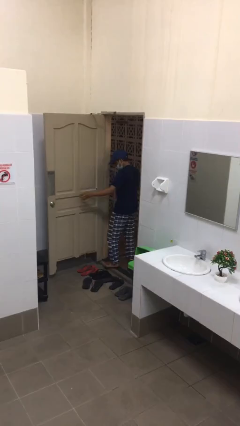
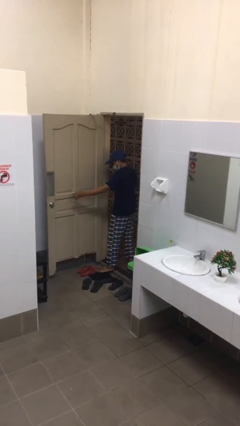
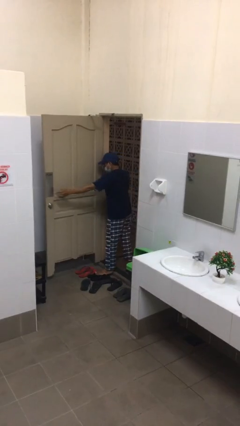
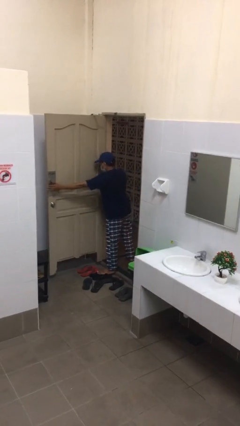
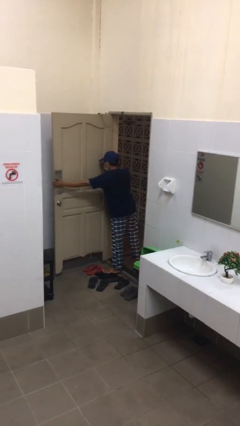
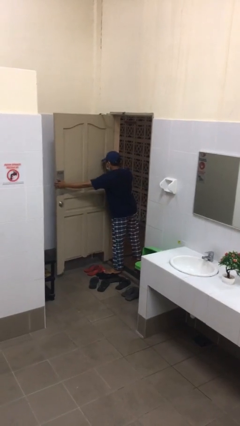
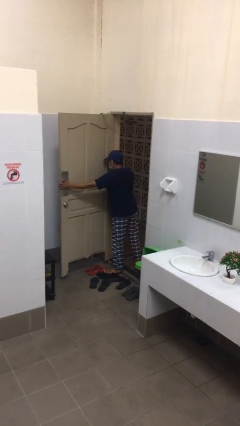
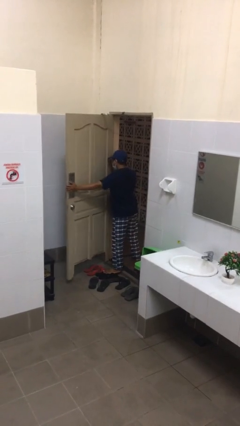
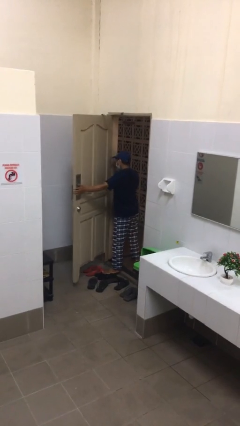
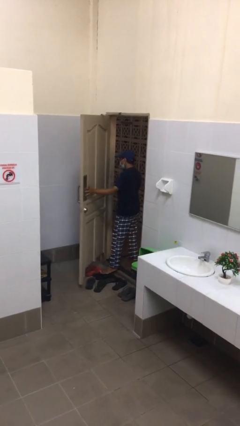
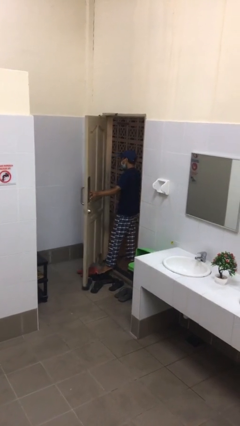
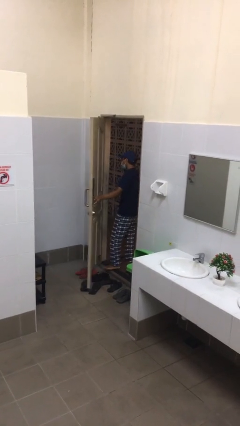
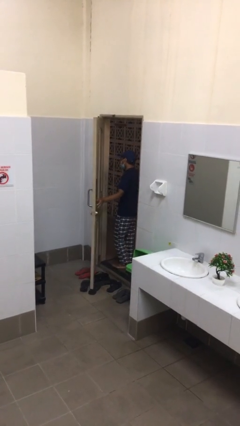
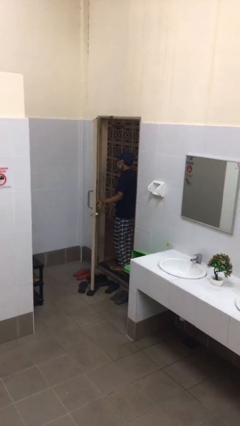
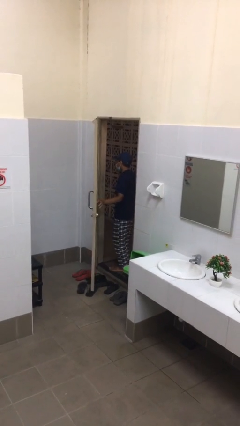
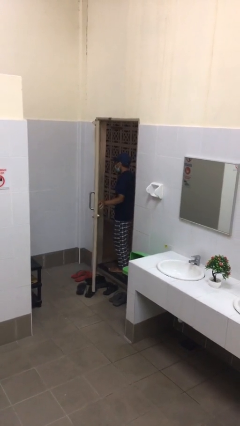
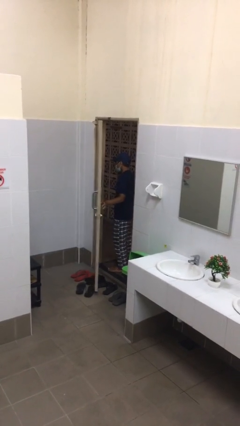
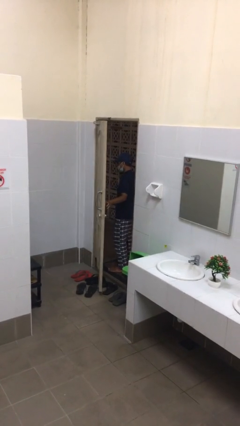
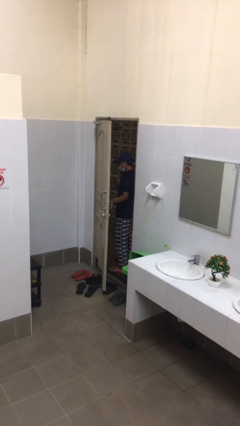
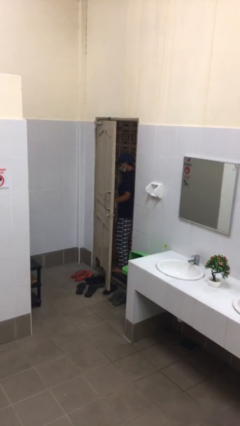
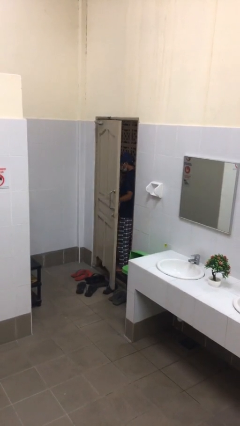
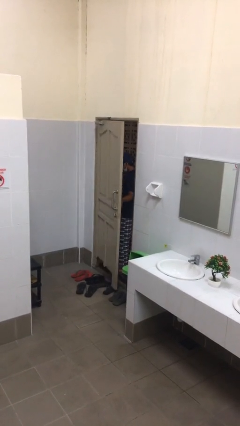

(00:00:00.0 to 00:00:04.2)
person closes facility door

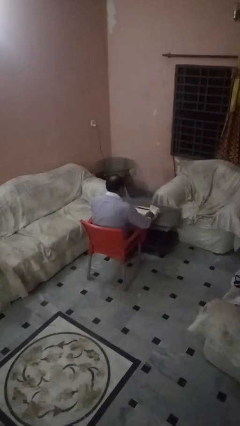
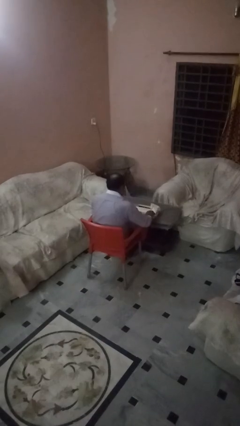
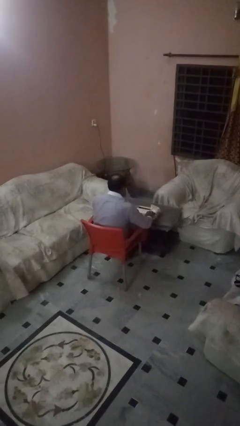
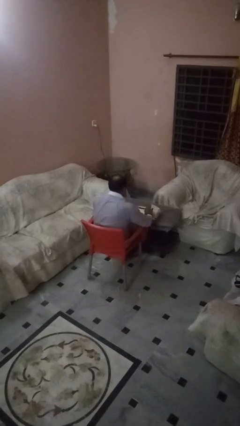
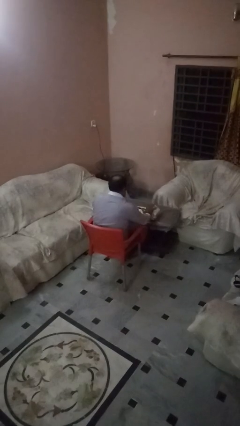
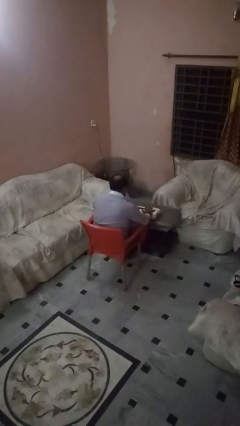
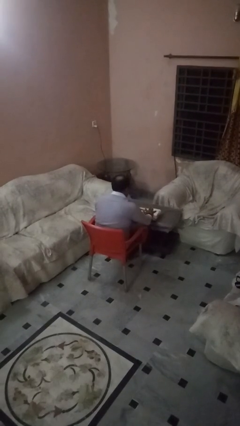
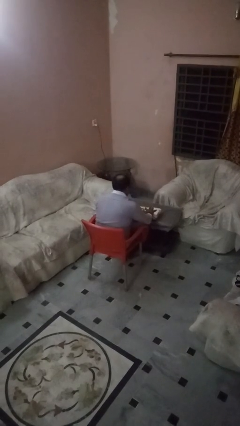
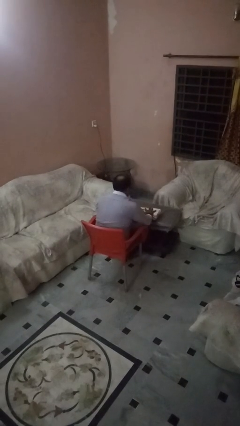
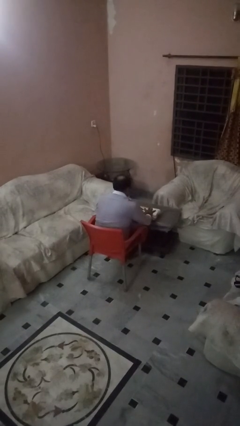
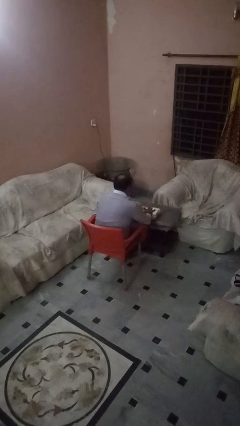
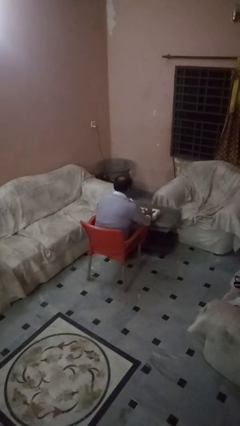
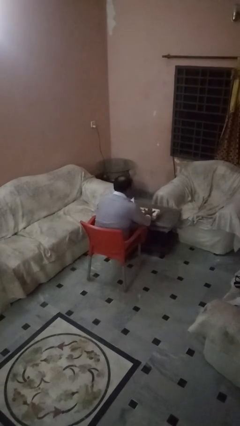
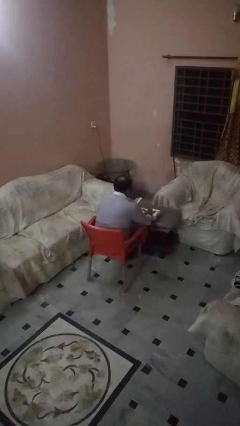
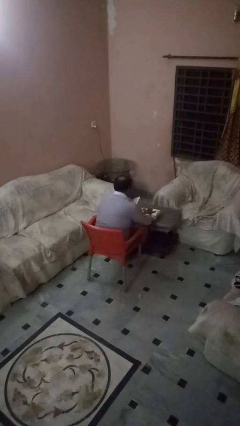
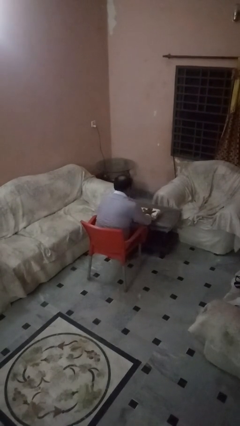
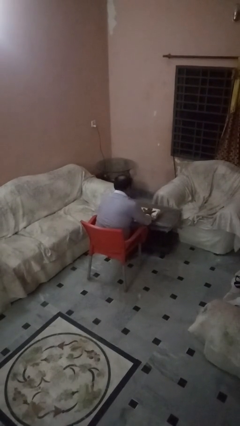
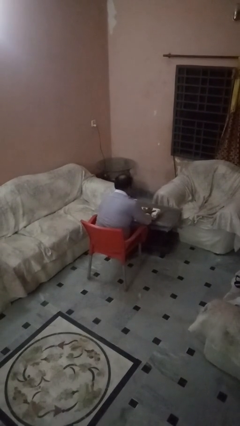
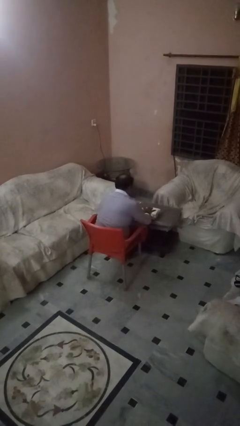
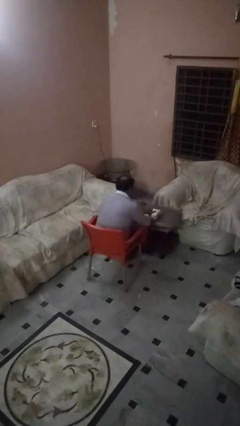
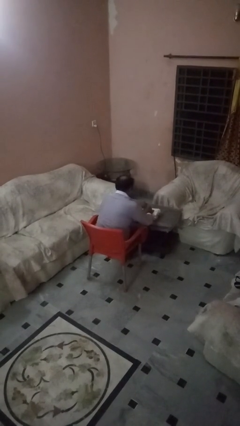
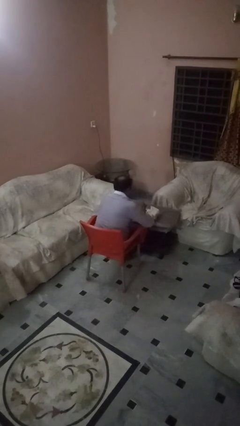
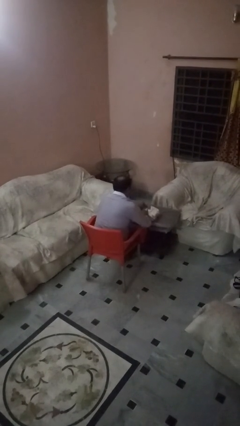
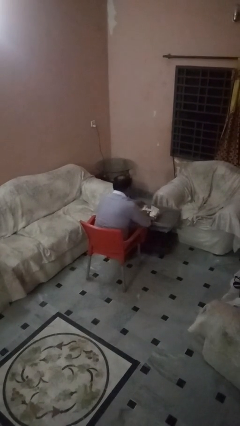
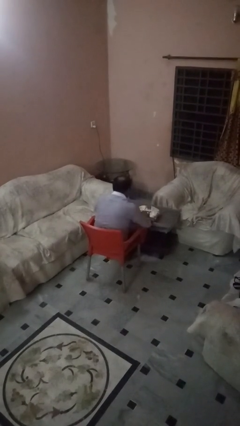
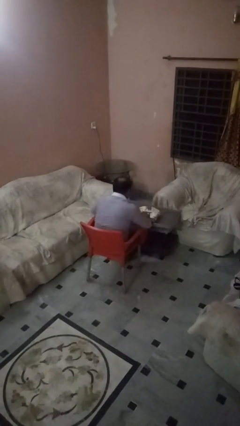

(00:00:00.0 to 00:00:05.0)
person wraps box

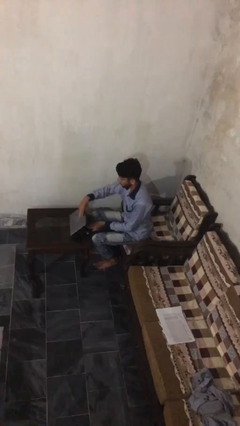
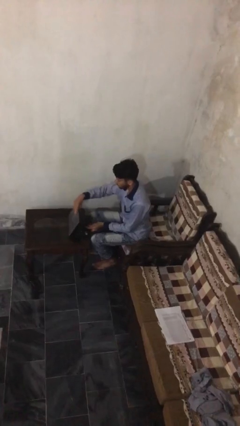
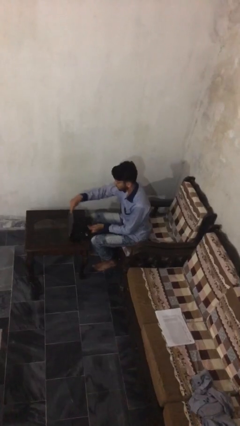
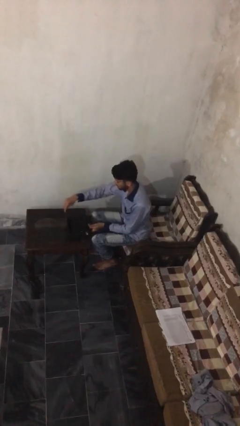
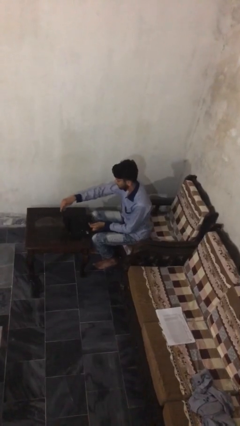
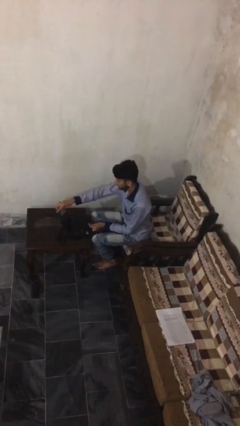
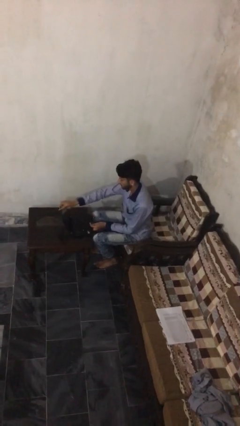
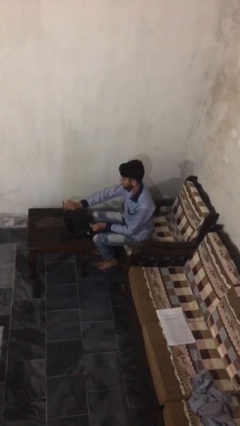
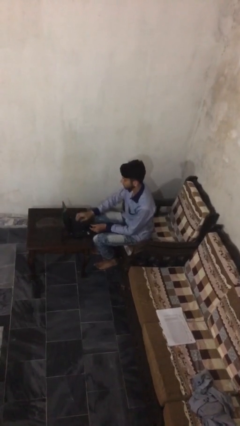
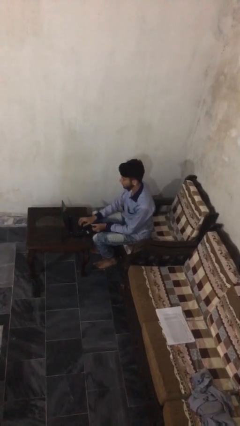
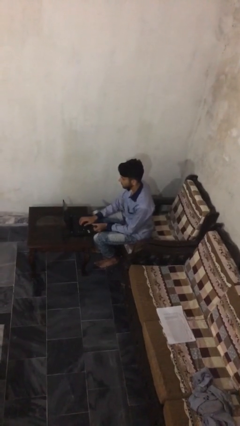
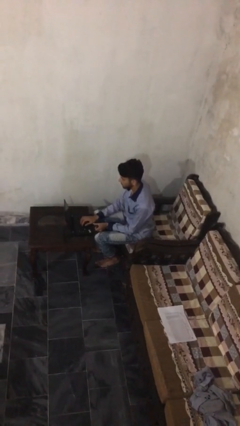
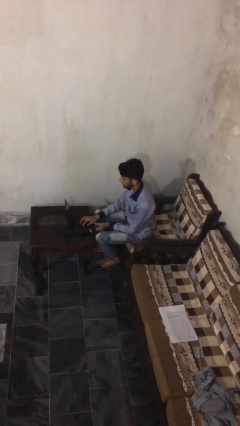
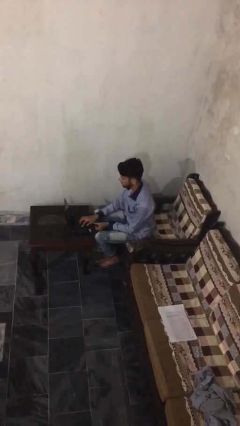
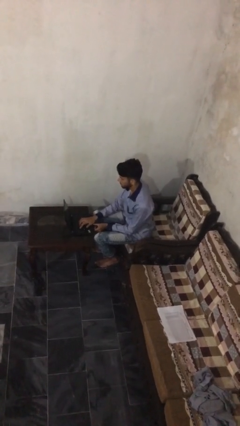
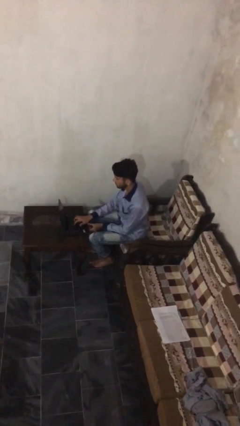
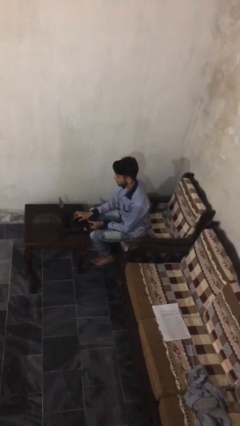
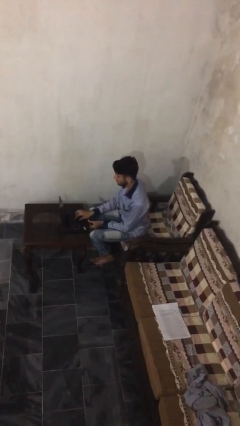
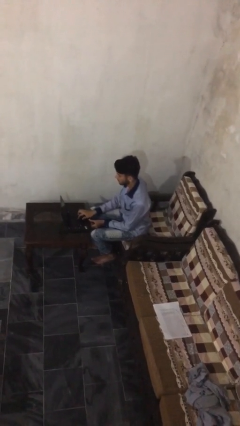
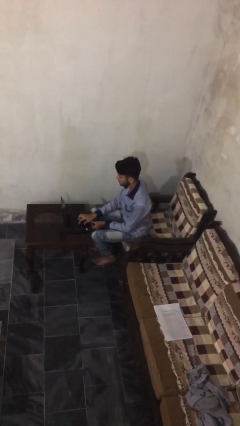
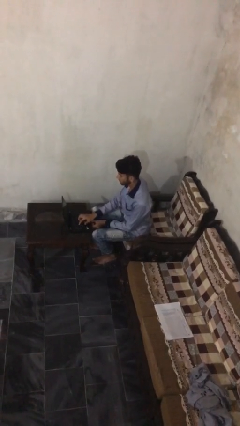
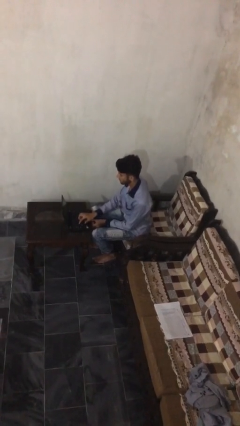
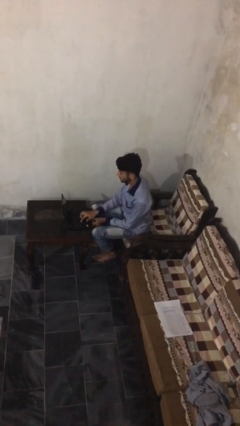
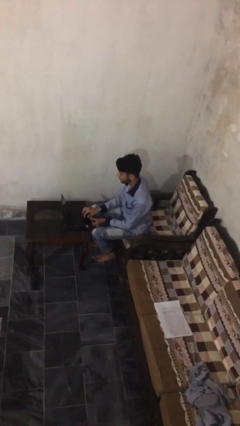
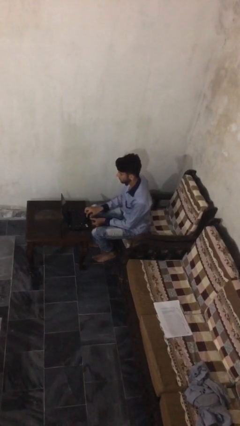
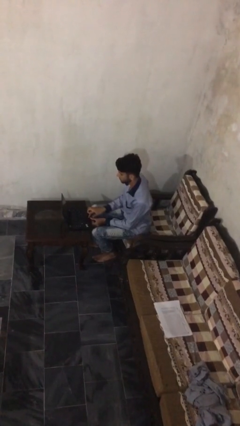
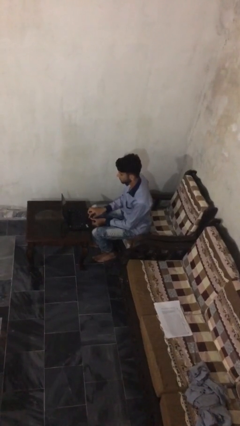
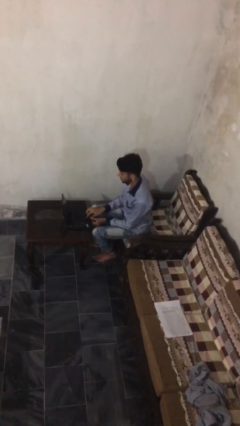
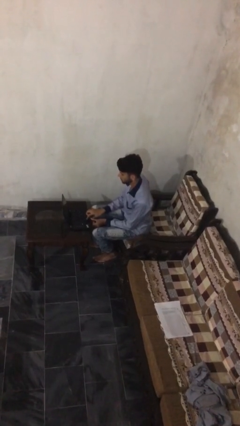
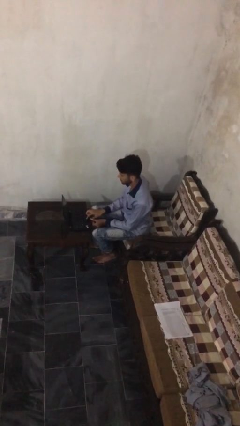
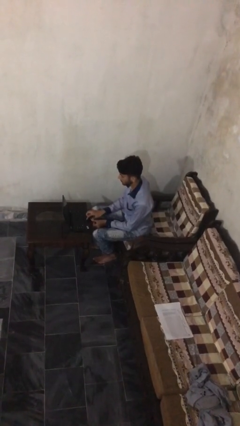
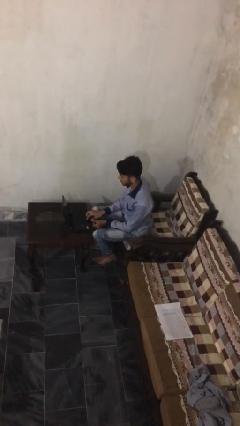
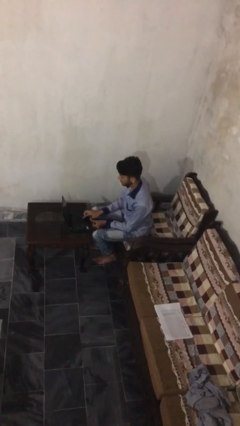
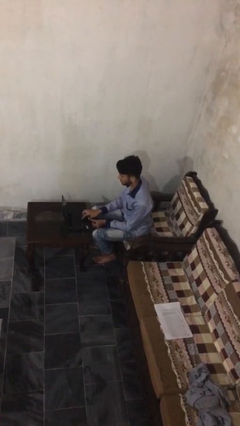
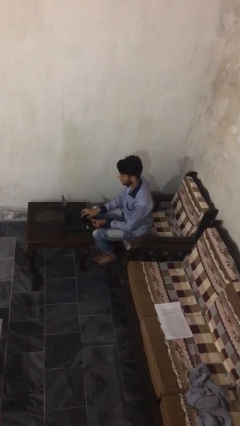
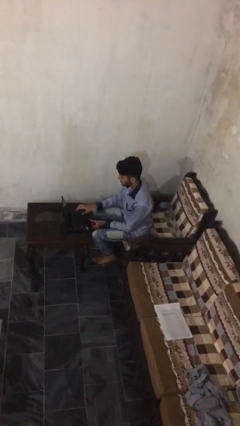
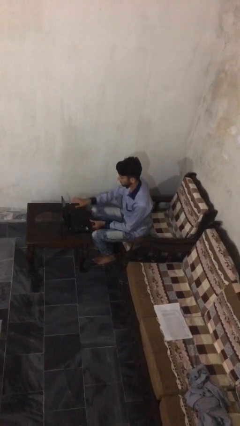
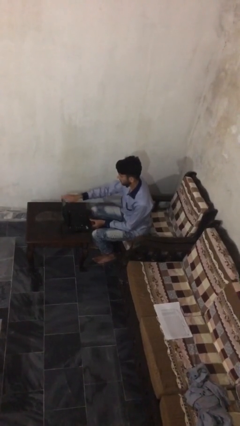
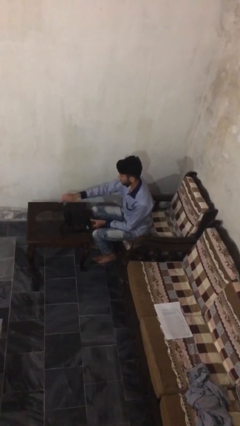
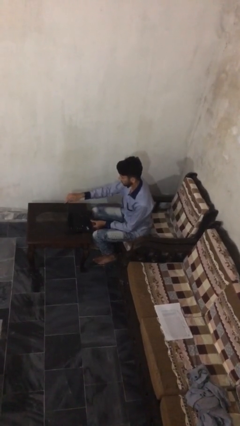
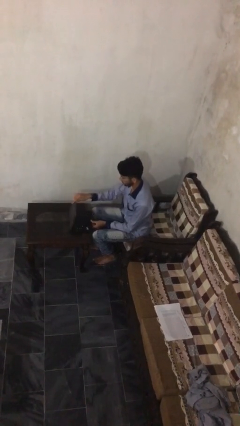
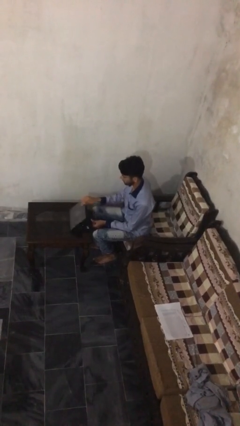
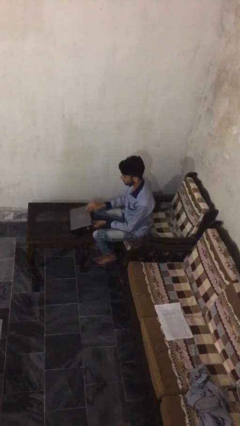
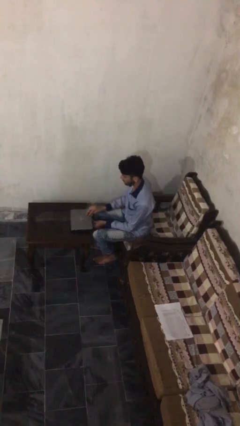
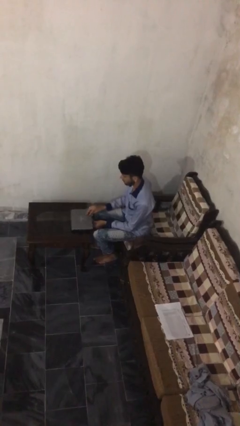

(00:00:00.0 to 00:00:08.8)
person interacts with laptop
